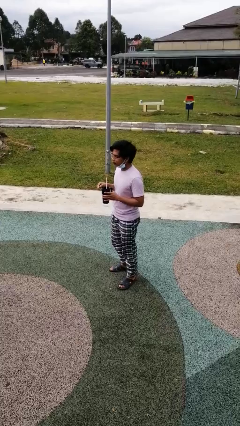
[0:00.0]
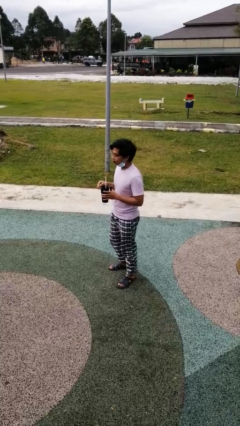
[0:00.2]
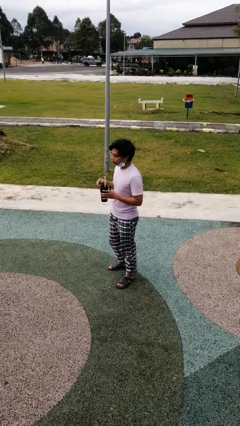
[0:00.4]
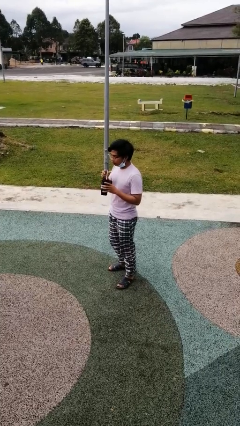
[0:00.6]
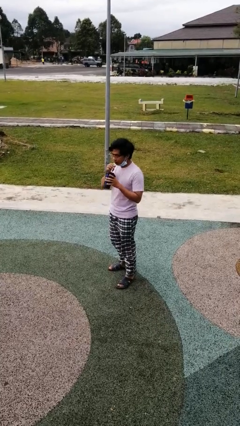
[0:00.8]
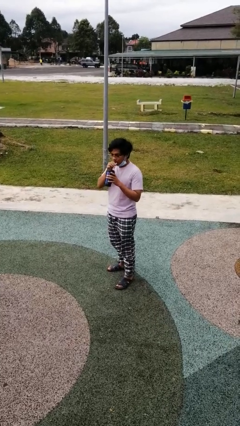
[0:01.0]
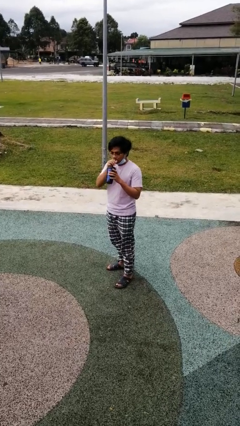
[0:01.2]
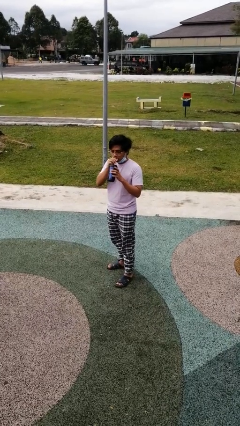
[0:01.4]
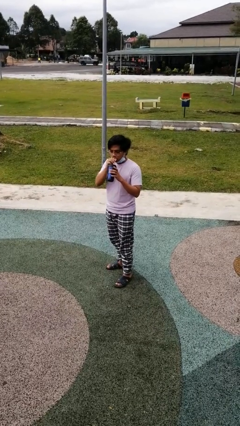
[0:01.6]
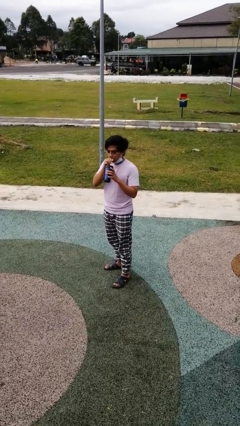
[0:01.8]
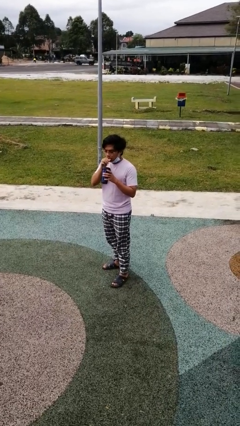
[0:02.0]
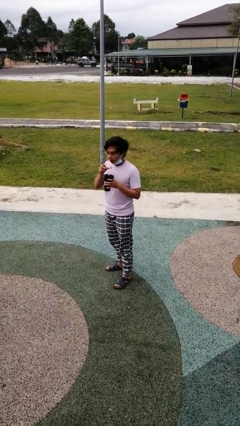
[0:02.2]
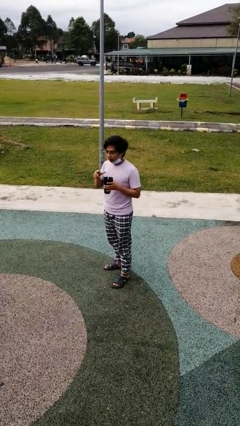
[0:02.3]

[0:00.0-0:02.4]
person drinks from straw

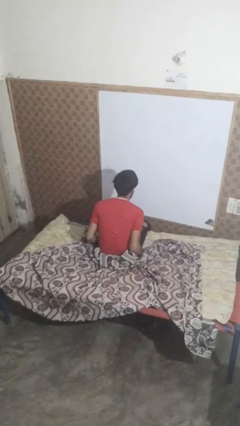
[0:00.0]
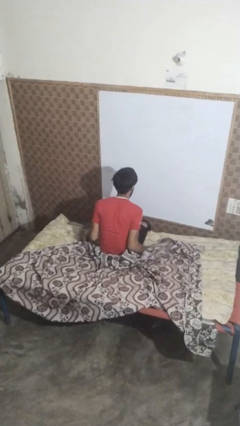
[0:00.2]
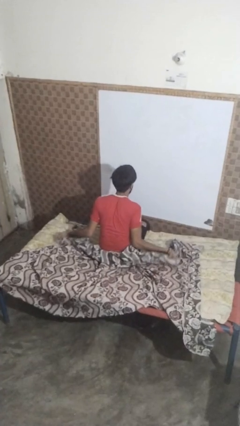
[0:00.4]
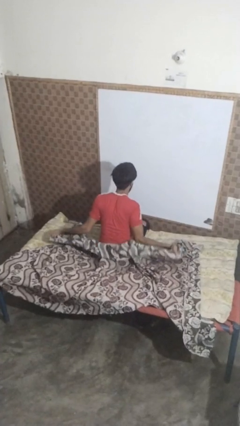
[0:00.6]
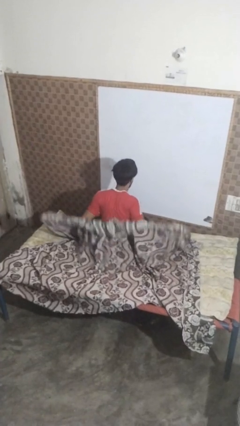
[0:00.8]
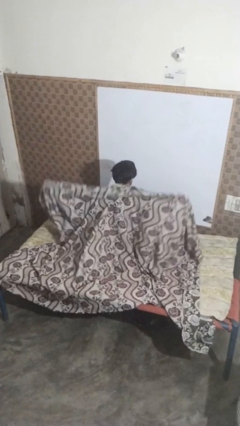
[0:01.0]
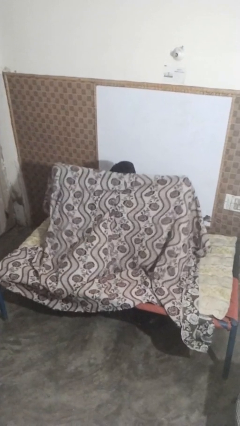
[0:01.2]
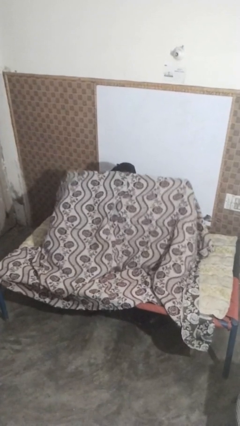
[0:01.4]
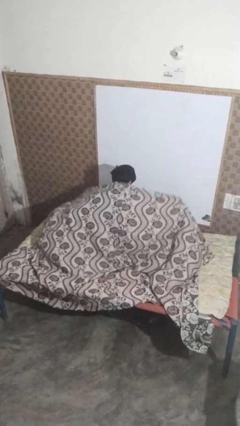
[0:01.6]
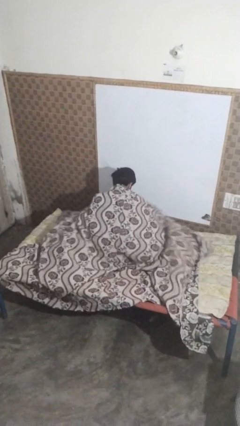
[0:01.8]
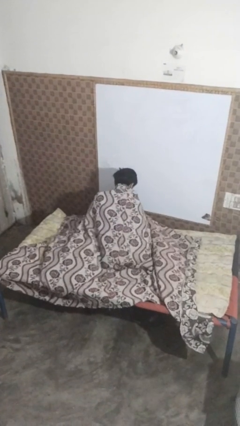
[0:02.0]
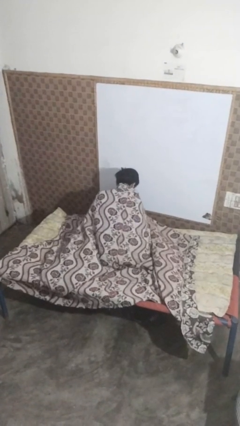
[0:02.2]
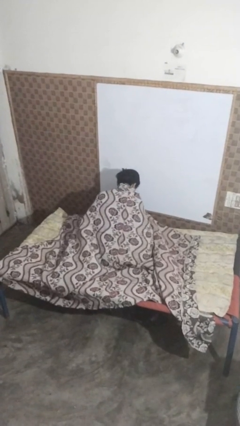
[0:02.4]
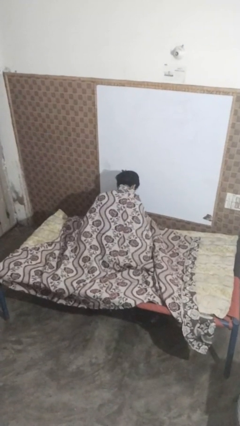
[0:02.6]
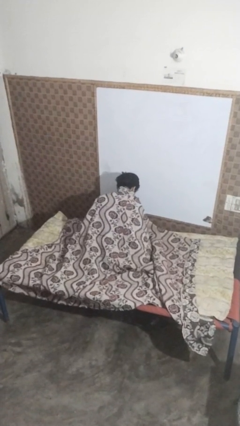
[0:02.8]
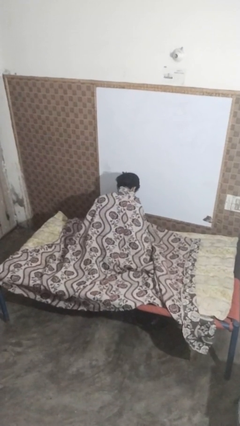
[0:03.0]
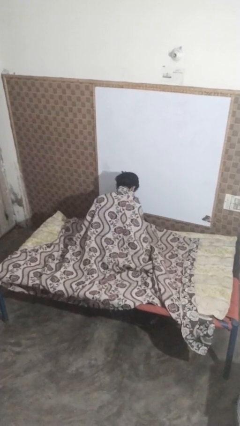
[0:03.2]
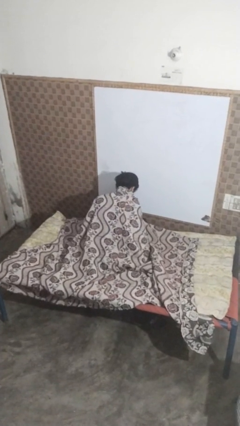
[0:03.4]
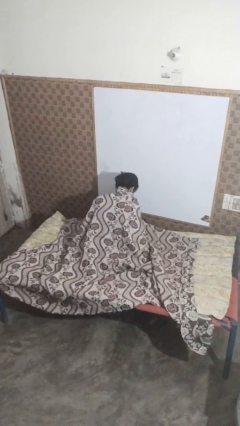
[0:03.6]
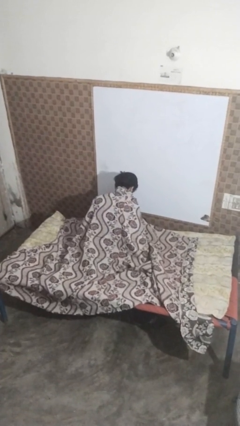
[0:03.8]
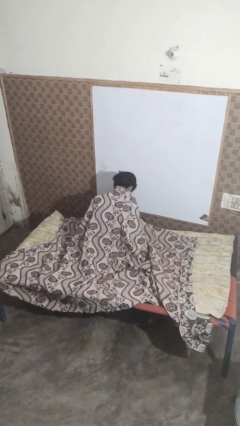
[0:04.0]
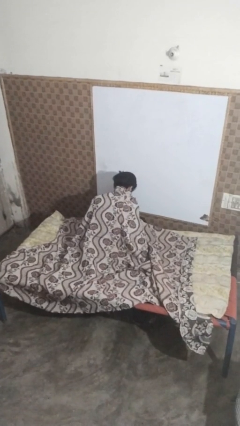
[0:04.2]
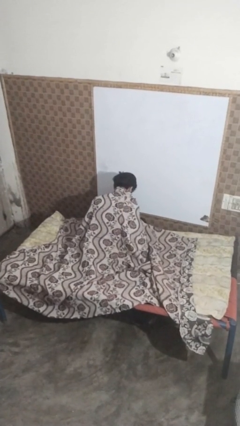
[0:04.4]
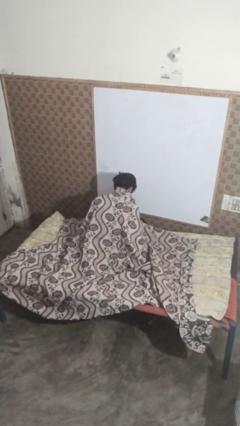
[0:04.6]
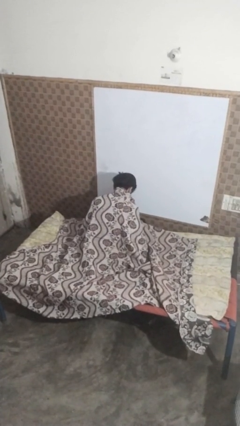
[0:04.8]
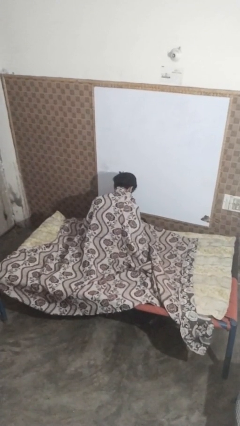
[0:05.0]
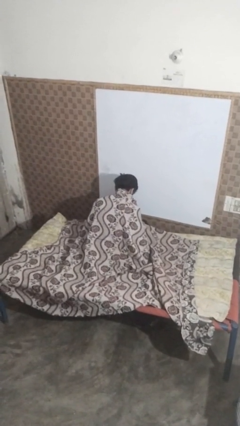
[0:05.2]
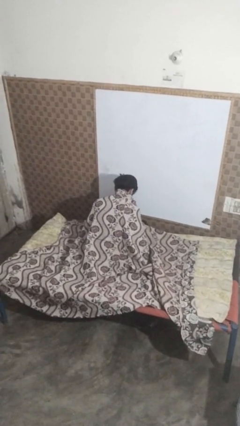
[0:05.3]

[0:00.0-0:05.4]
person covers with blanket

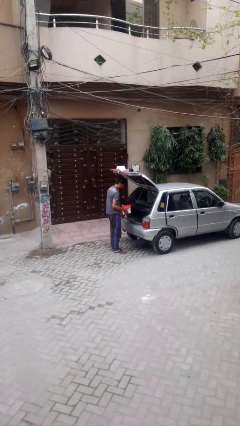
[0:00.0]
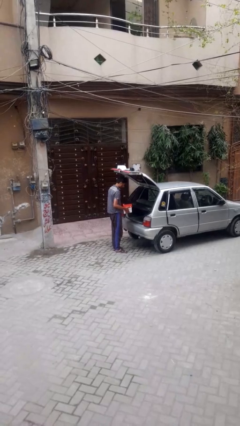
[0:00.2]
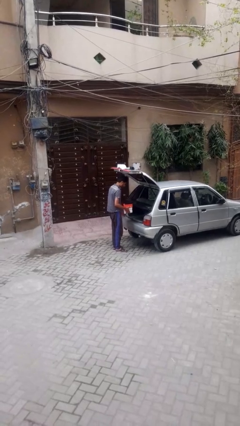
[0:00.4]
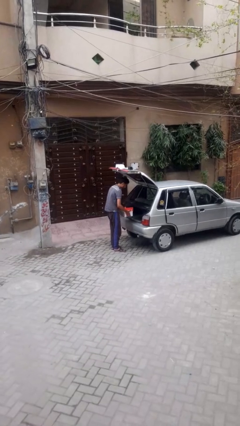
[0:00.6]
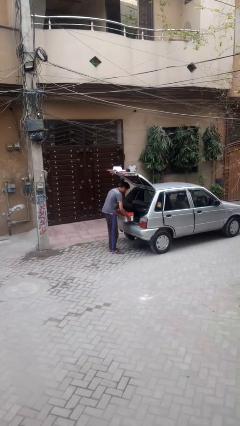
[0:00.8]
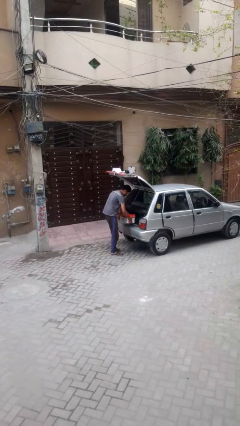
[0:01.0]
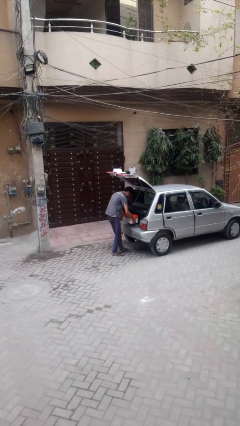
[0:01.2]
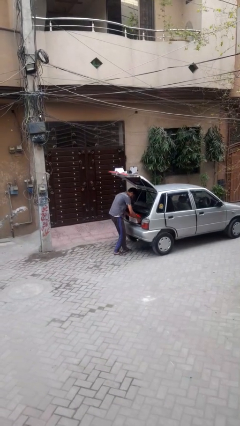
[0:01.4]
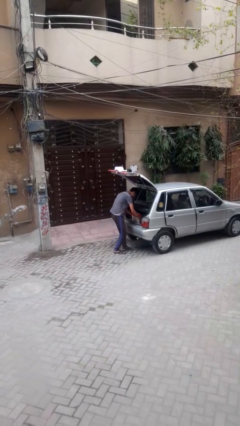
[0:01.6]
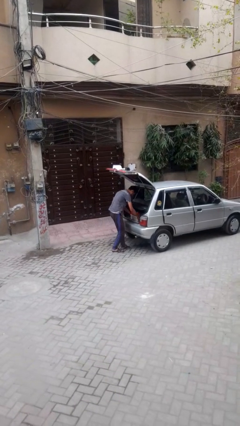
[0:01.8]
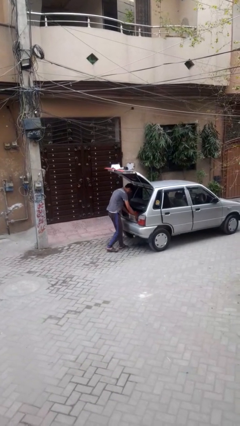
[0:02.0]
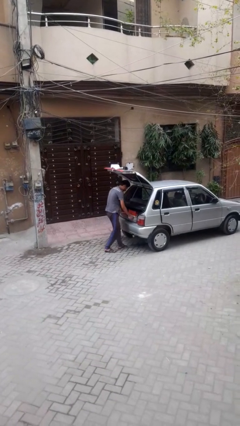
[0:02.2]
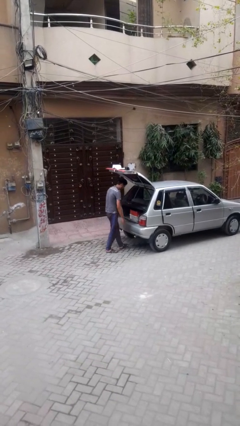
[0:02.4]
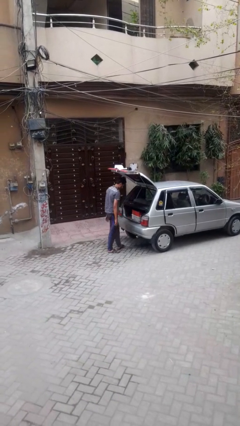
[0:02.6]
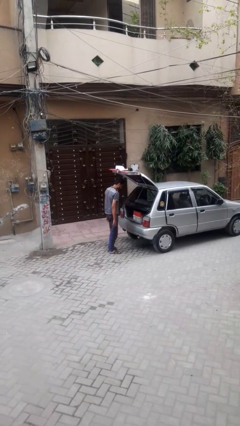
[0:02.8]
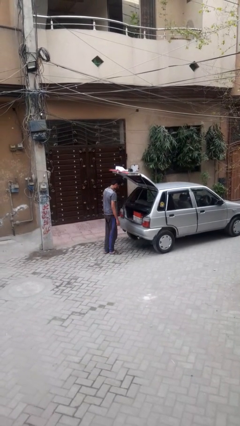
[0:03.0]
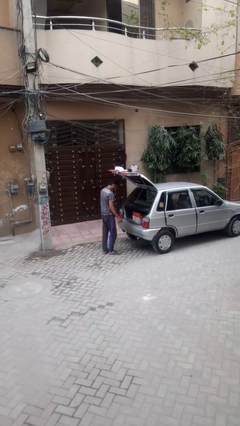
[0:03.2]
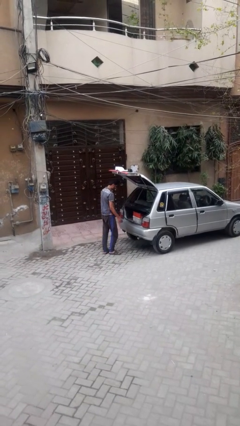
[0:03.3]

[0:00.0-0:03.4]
person loads car

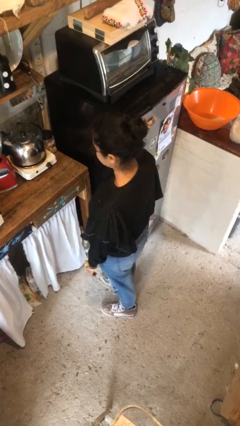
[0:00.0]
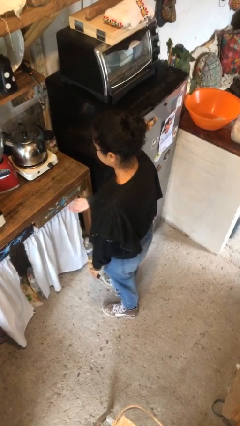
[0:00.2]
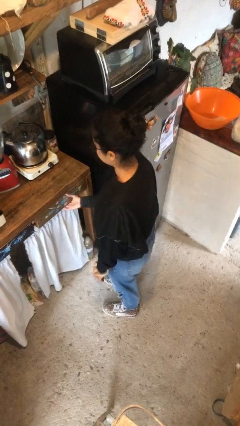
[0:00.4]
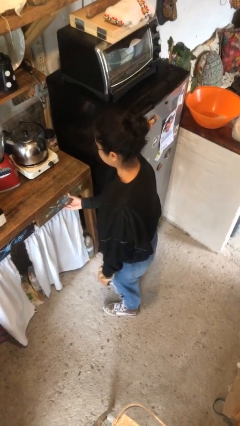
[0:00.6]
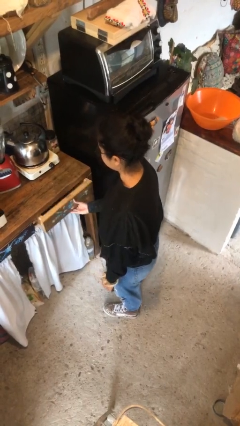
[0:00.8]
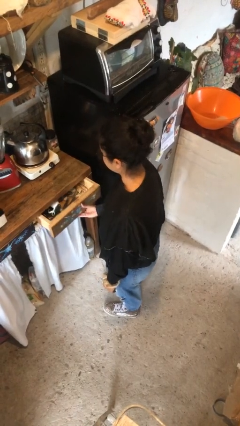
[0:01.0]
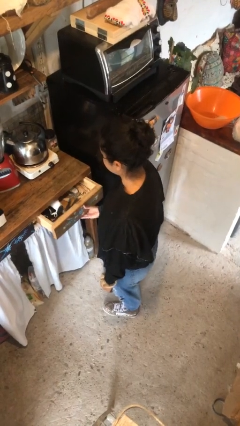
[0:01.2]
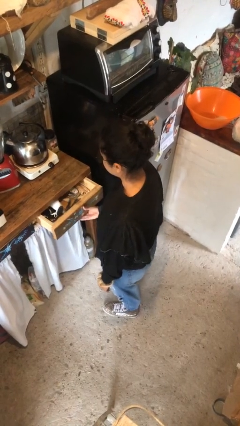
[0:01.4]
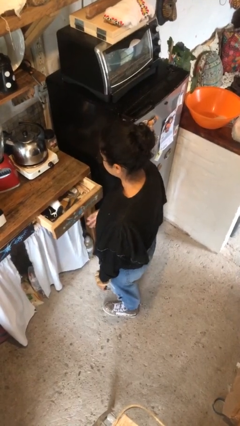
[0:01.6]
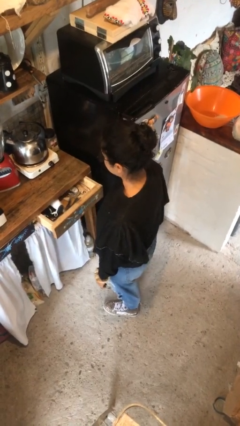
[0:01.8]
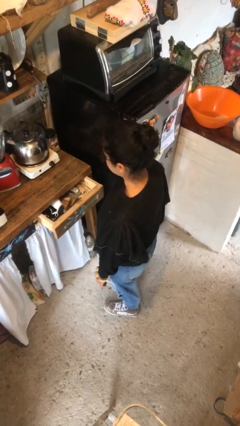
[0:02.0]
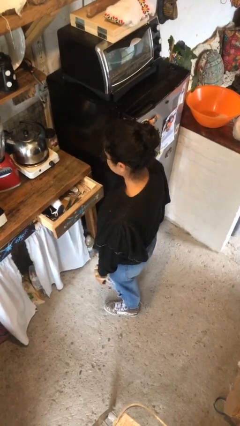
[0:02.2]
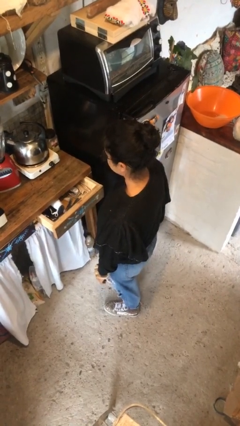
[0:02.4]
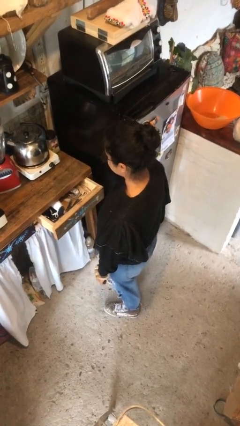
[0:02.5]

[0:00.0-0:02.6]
person opens kitchen drawer

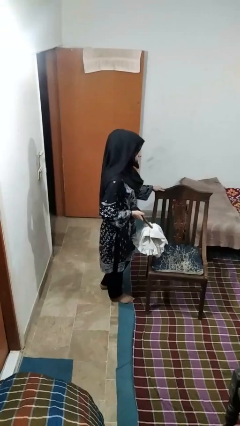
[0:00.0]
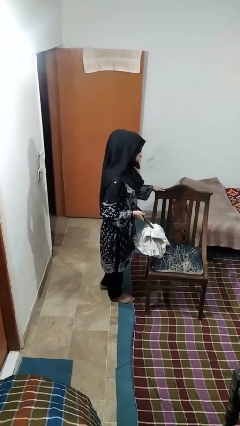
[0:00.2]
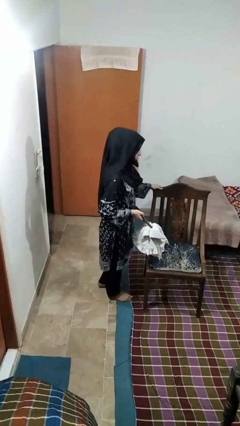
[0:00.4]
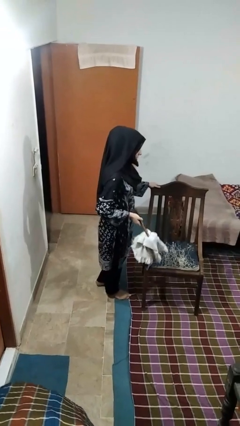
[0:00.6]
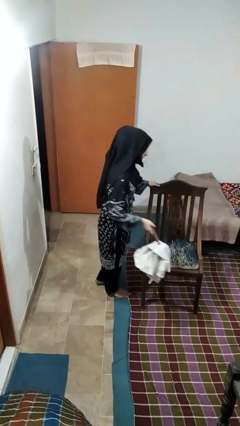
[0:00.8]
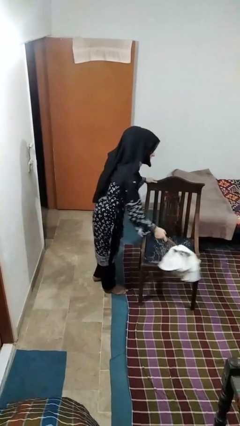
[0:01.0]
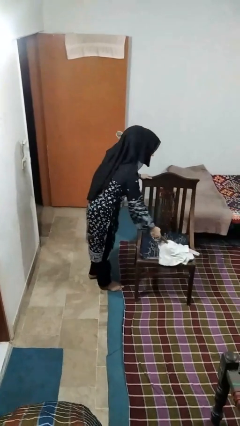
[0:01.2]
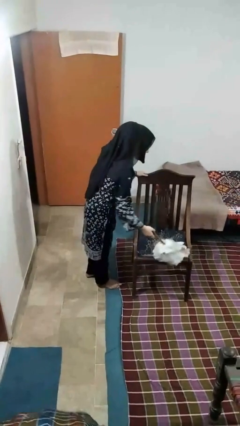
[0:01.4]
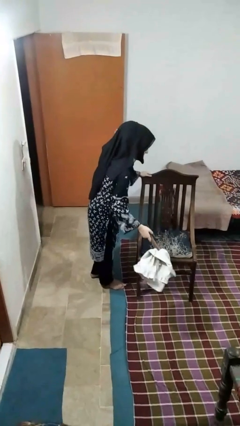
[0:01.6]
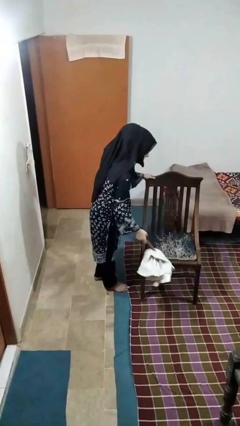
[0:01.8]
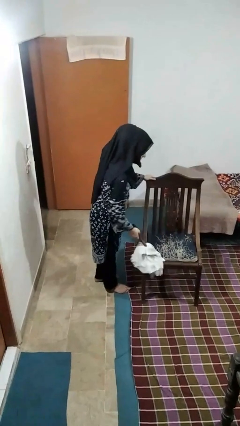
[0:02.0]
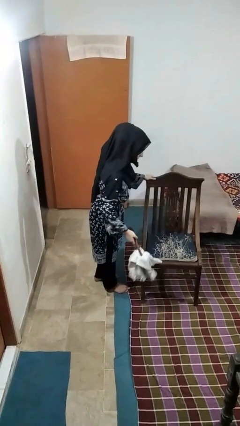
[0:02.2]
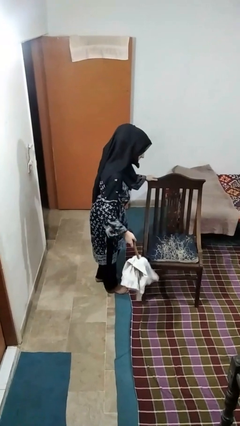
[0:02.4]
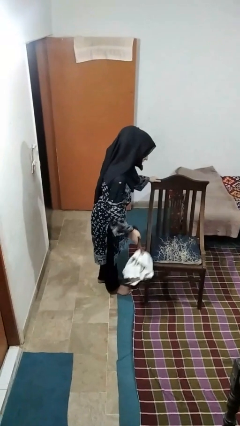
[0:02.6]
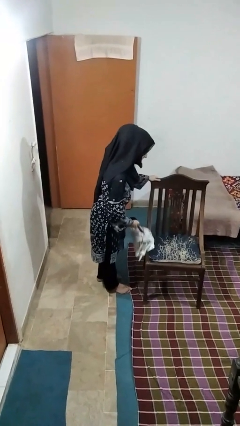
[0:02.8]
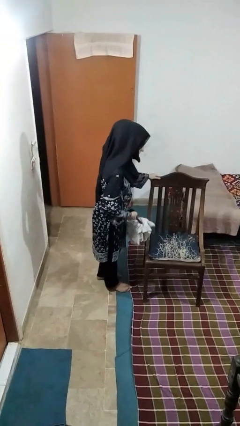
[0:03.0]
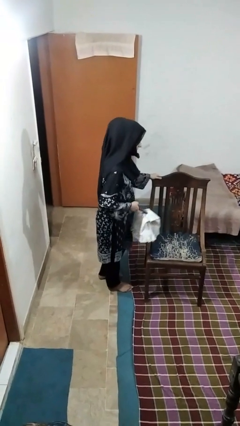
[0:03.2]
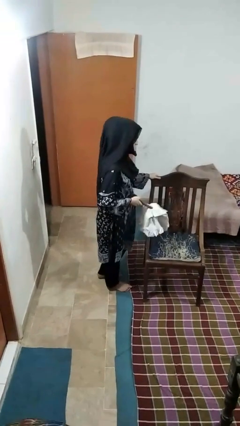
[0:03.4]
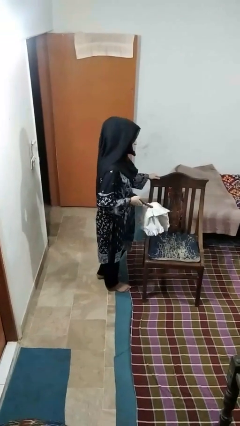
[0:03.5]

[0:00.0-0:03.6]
person dusts furniture
